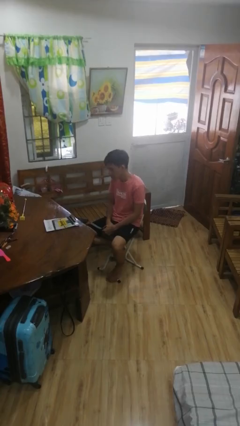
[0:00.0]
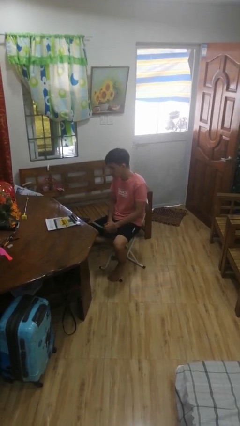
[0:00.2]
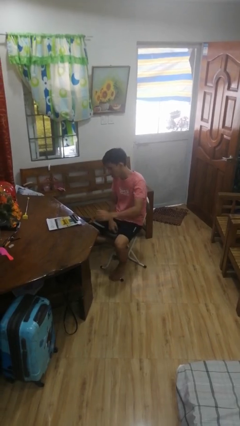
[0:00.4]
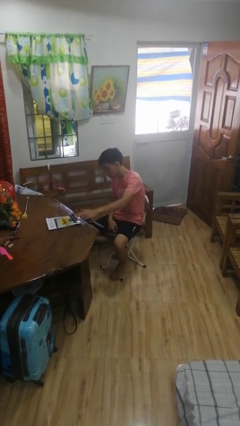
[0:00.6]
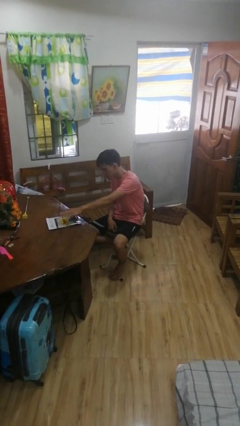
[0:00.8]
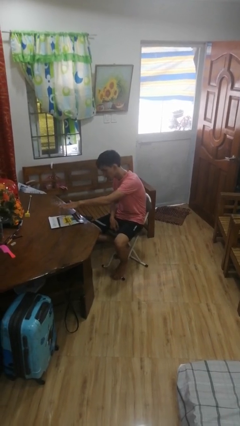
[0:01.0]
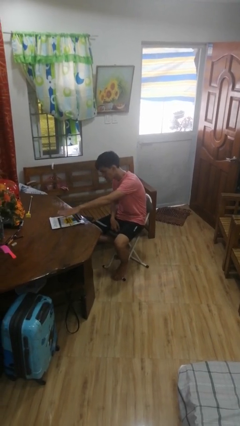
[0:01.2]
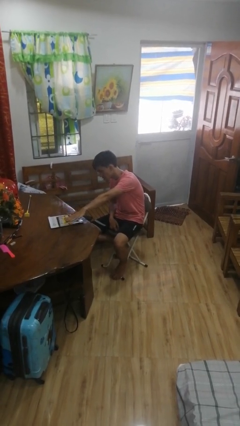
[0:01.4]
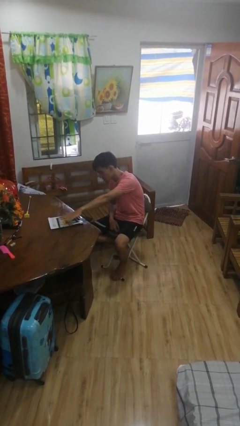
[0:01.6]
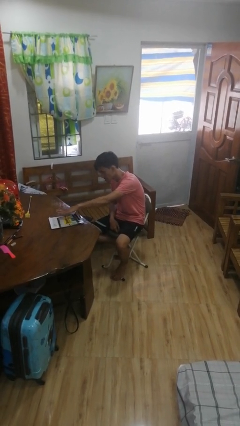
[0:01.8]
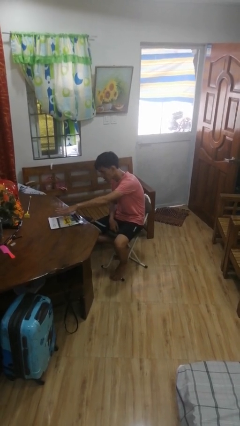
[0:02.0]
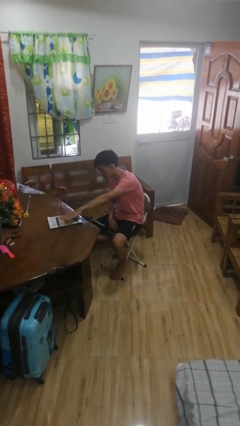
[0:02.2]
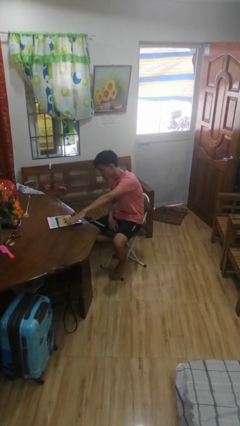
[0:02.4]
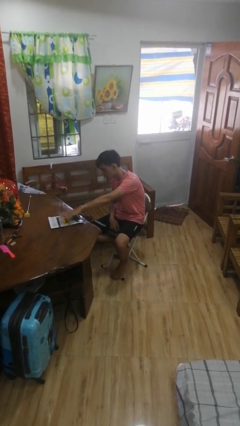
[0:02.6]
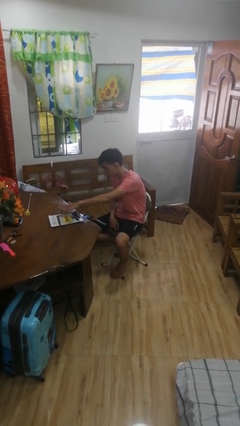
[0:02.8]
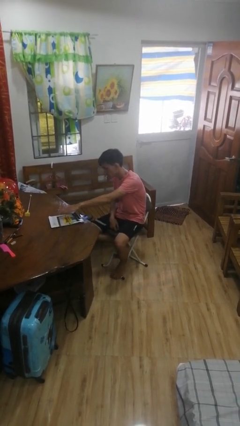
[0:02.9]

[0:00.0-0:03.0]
person waves hand over object

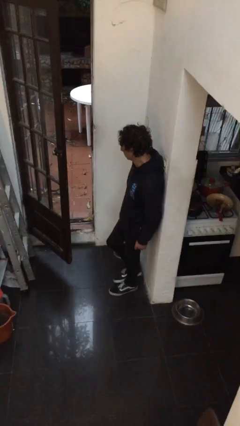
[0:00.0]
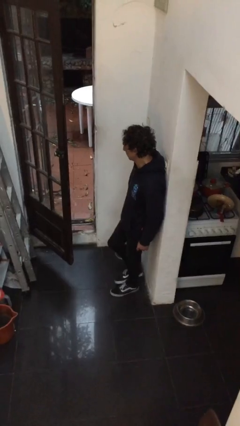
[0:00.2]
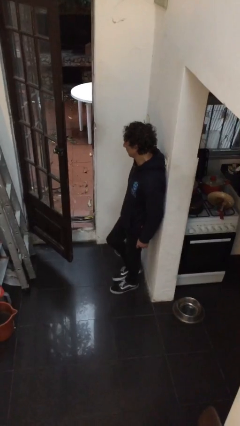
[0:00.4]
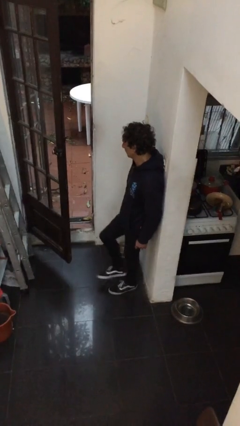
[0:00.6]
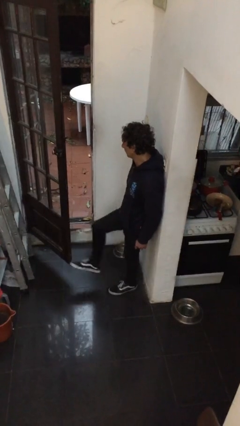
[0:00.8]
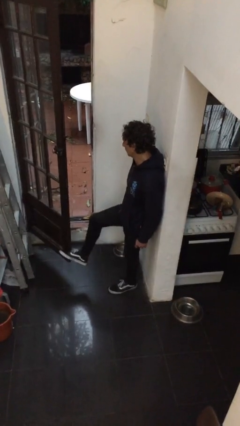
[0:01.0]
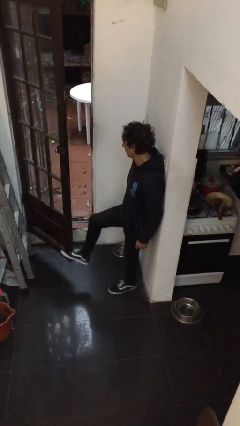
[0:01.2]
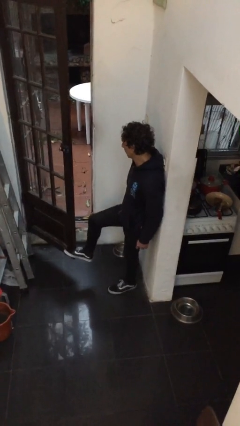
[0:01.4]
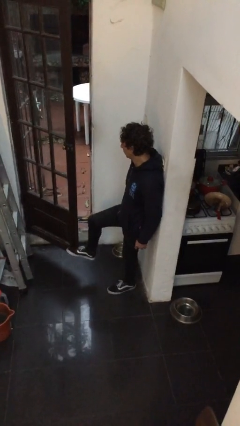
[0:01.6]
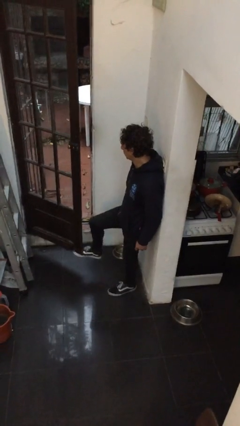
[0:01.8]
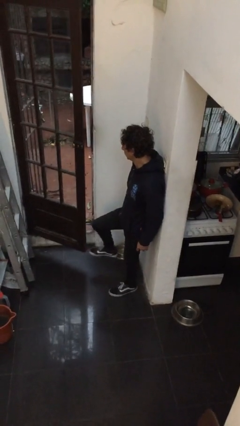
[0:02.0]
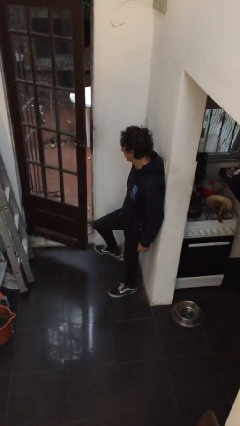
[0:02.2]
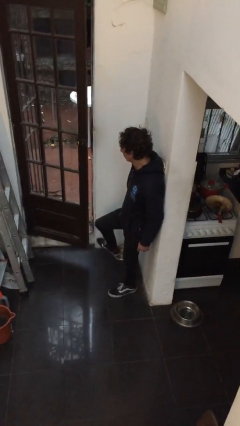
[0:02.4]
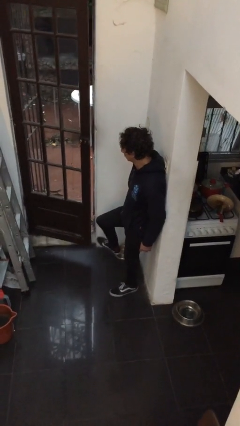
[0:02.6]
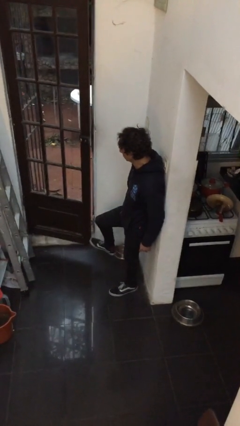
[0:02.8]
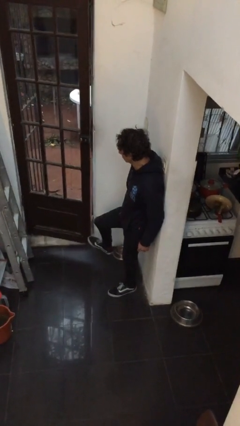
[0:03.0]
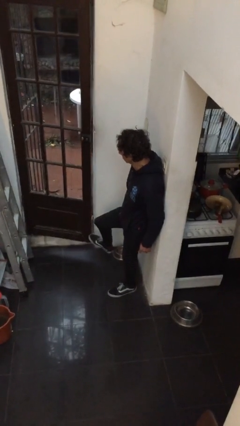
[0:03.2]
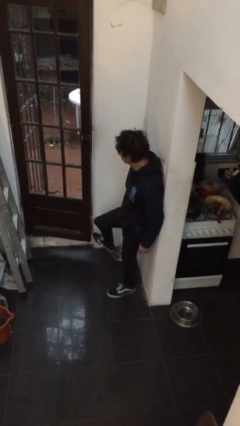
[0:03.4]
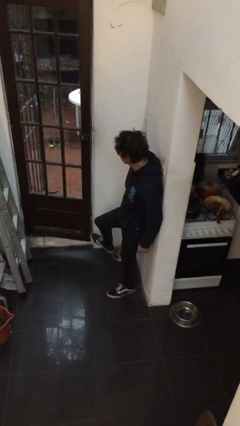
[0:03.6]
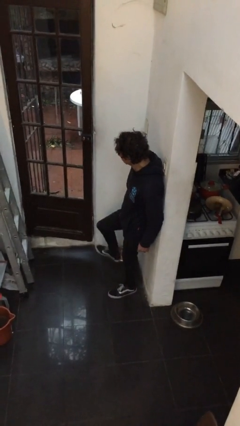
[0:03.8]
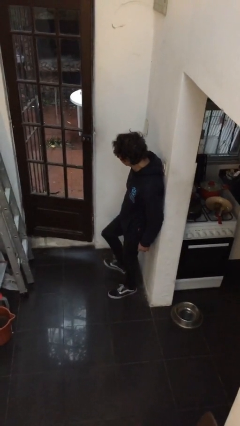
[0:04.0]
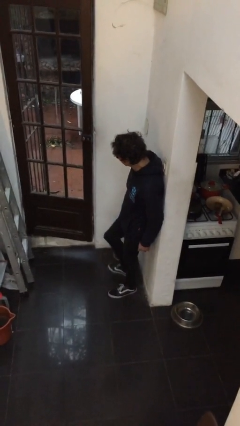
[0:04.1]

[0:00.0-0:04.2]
person closes door with foot

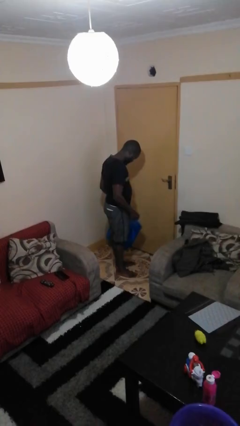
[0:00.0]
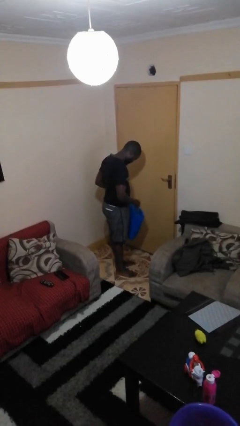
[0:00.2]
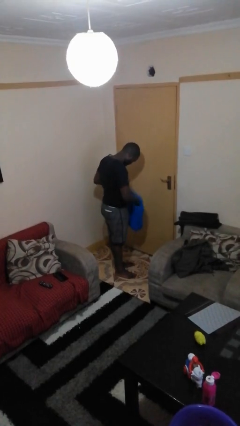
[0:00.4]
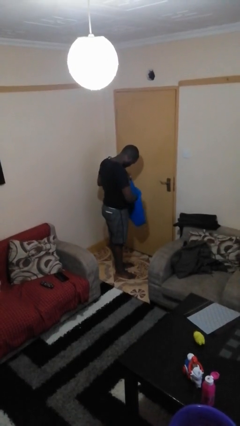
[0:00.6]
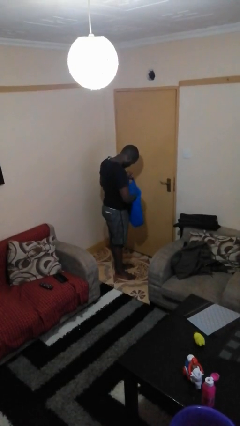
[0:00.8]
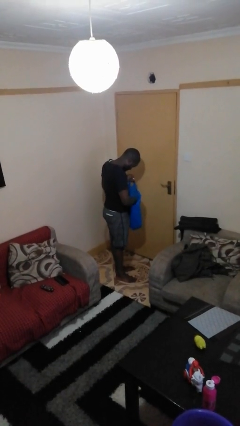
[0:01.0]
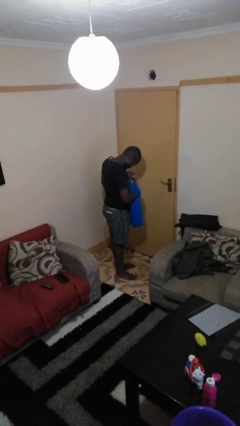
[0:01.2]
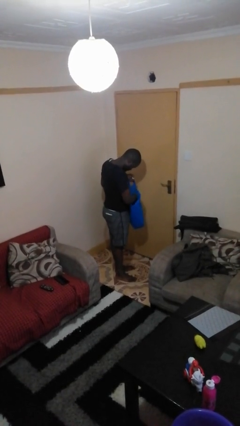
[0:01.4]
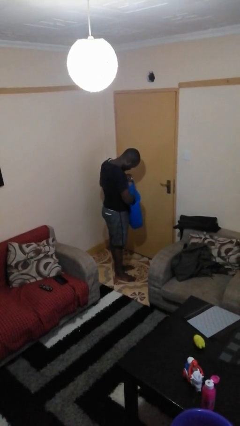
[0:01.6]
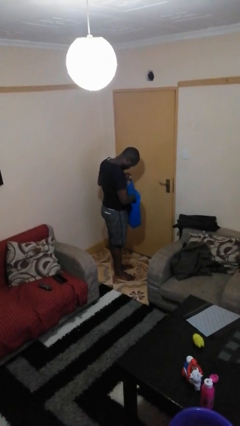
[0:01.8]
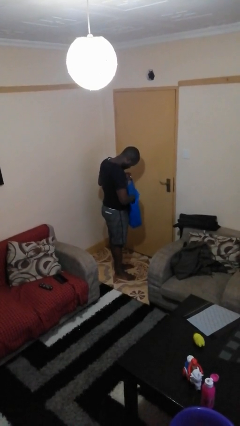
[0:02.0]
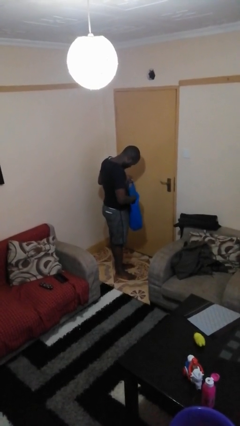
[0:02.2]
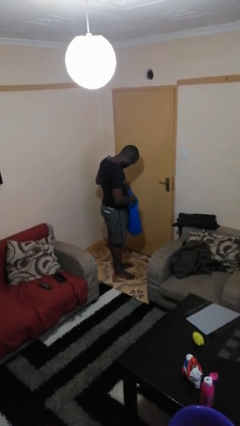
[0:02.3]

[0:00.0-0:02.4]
person searches in bag

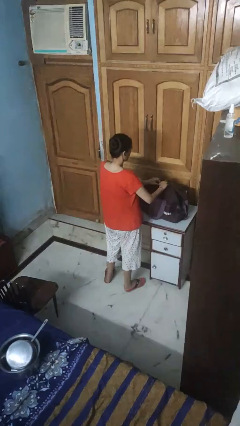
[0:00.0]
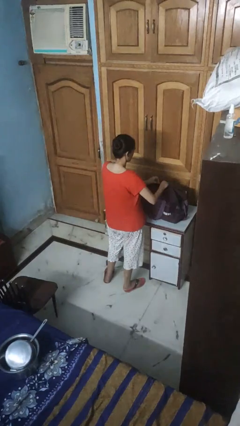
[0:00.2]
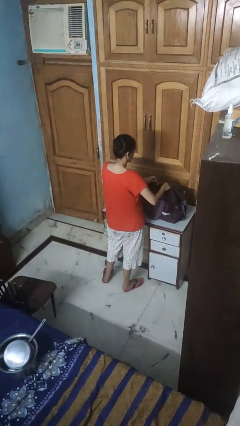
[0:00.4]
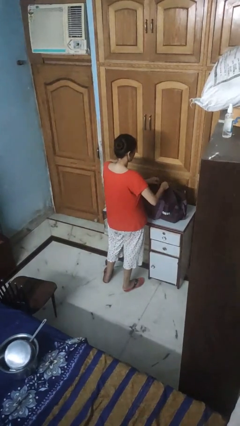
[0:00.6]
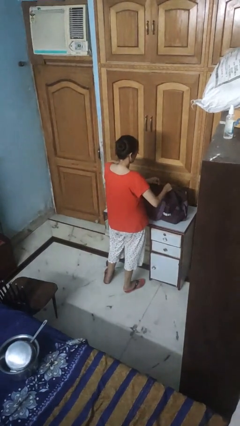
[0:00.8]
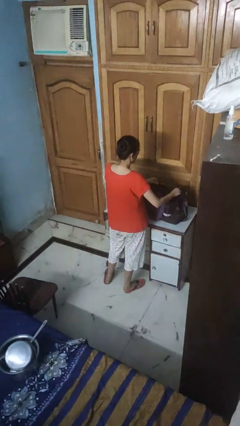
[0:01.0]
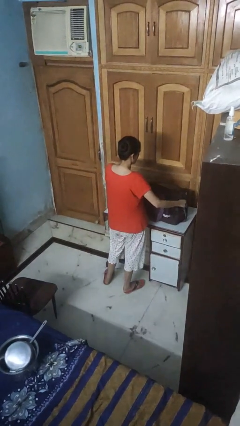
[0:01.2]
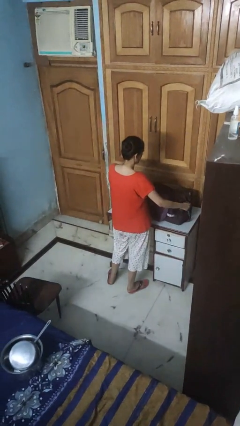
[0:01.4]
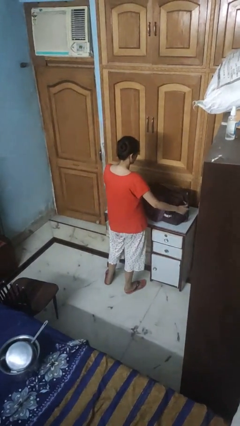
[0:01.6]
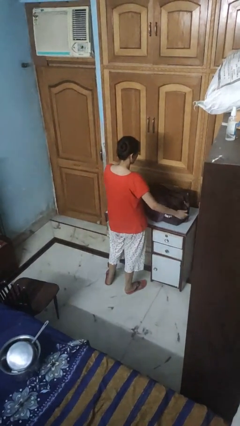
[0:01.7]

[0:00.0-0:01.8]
person opens suitcase

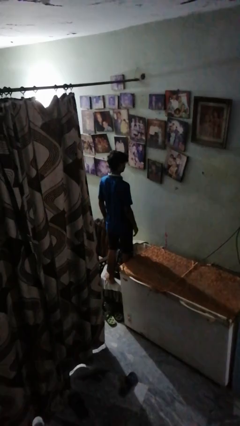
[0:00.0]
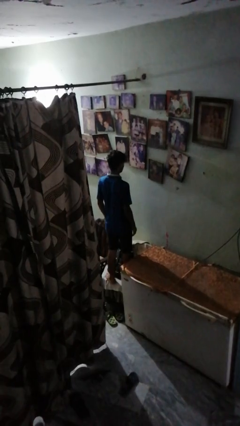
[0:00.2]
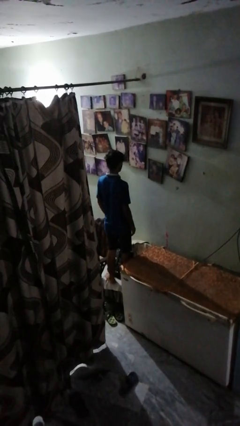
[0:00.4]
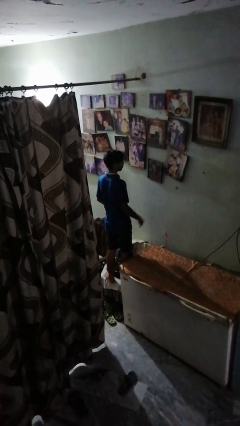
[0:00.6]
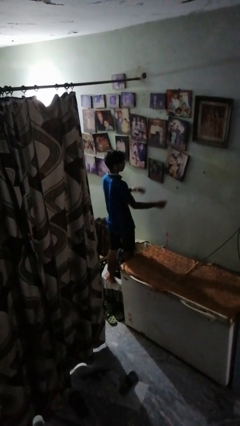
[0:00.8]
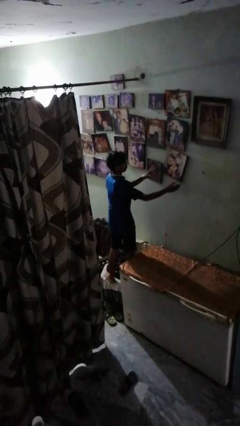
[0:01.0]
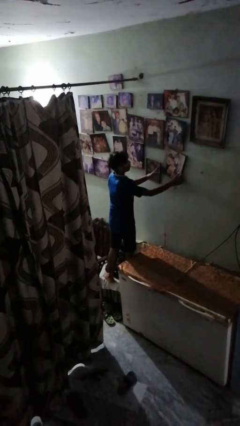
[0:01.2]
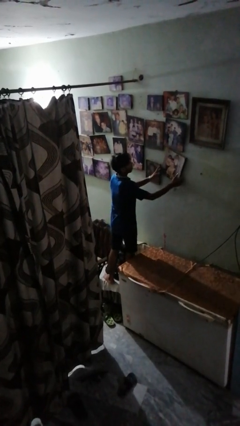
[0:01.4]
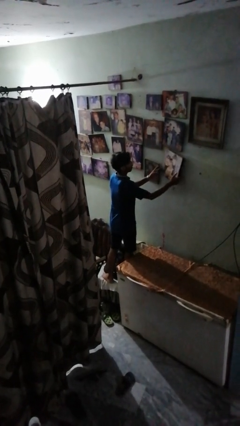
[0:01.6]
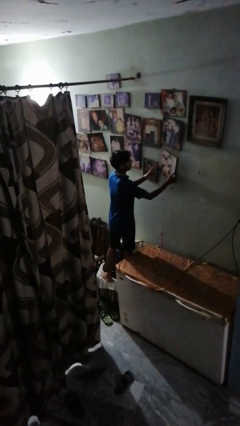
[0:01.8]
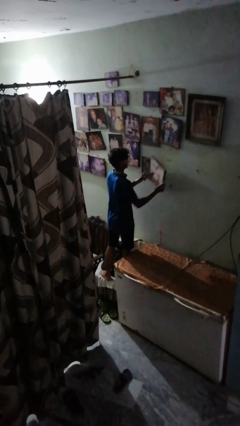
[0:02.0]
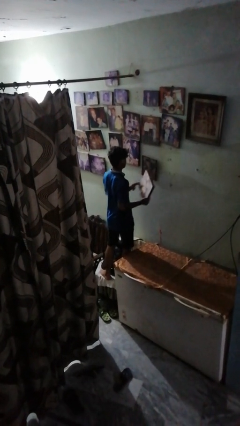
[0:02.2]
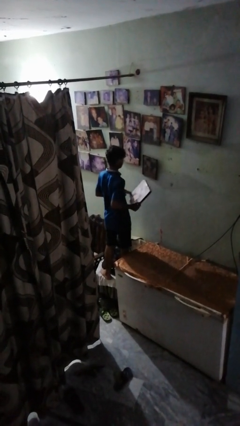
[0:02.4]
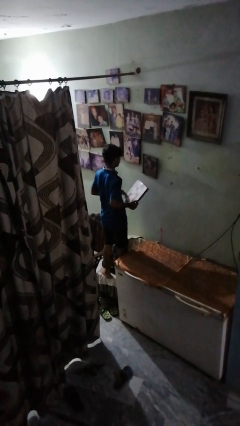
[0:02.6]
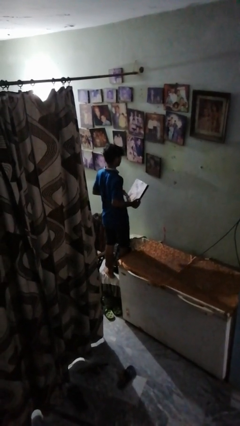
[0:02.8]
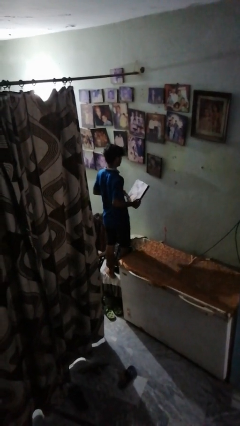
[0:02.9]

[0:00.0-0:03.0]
person takes down picture frame

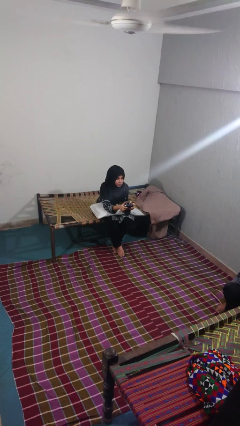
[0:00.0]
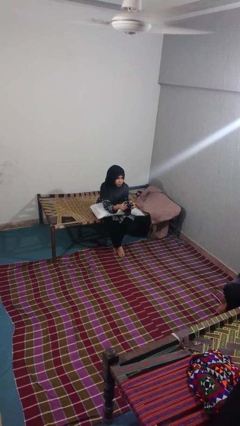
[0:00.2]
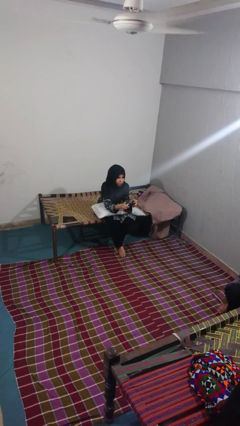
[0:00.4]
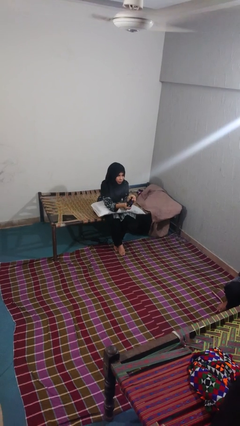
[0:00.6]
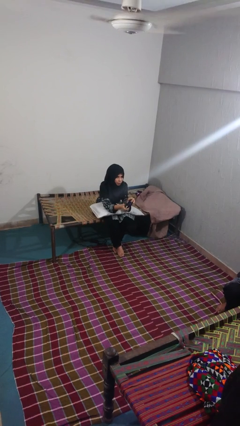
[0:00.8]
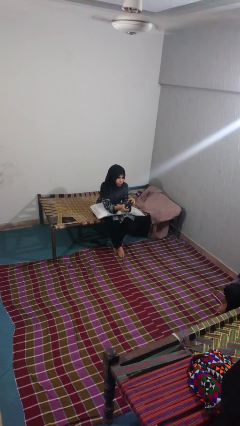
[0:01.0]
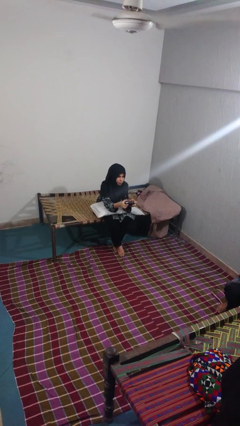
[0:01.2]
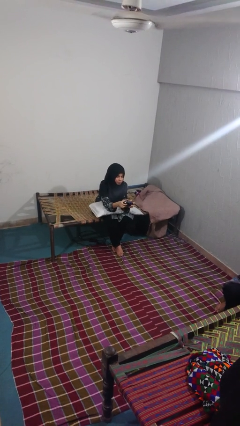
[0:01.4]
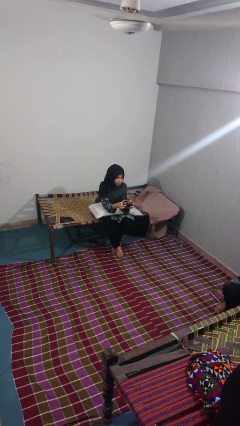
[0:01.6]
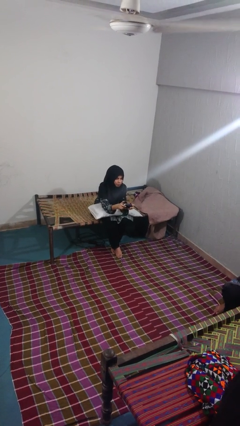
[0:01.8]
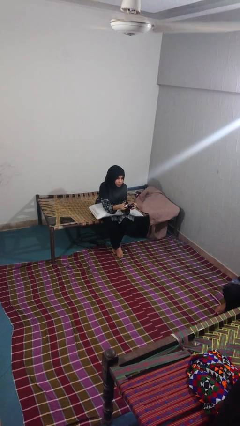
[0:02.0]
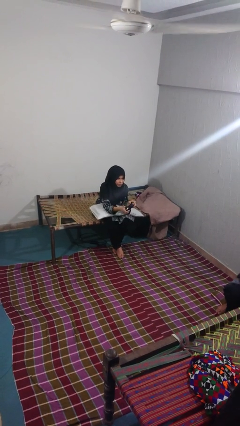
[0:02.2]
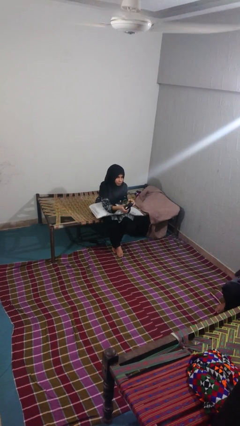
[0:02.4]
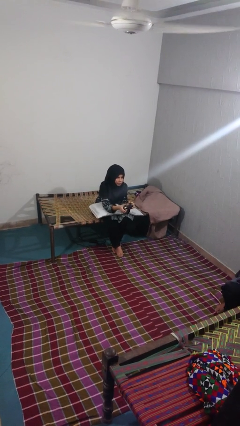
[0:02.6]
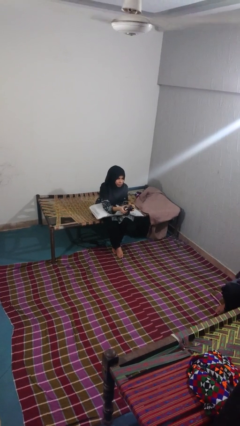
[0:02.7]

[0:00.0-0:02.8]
person interacts with handheld game
